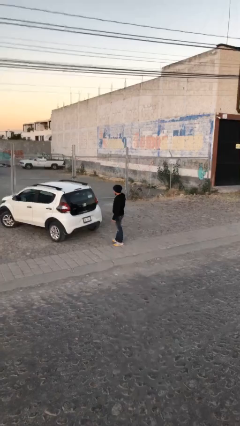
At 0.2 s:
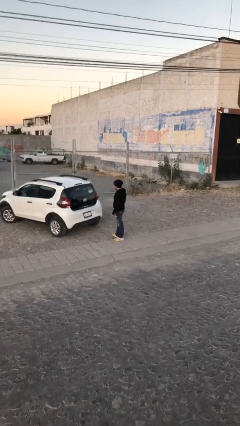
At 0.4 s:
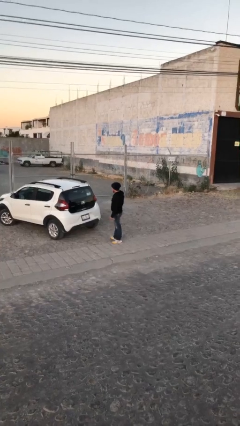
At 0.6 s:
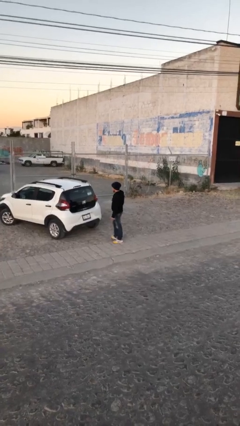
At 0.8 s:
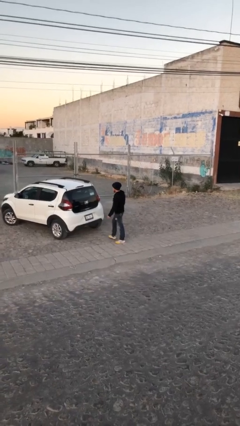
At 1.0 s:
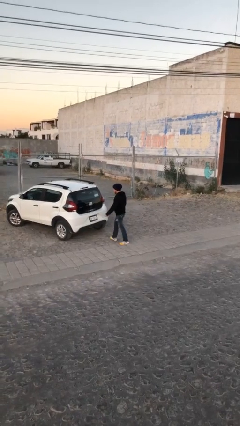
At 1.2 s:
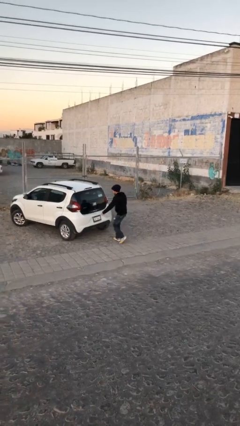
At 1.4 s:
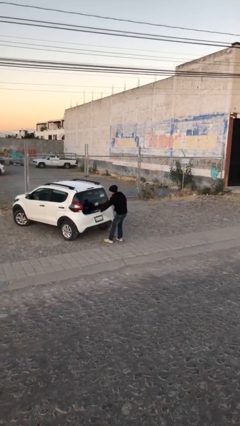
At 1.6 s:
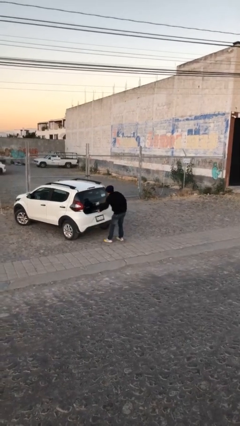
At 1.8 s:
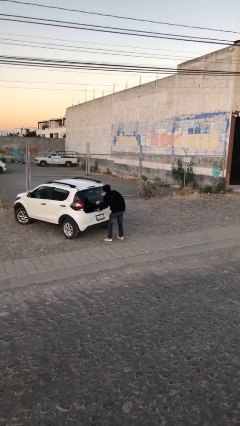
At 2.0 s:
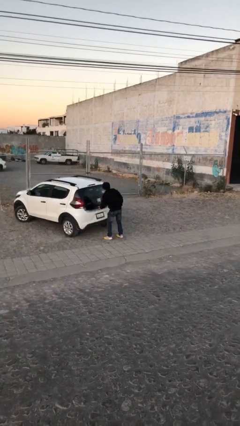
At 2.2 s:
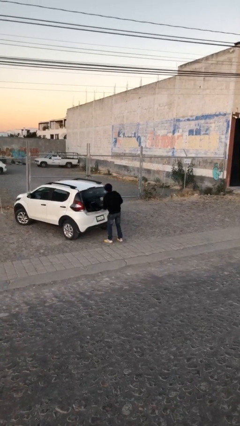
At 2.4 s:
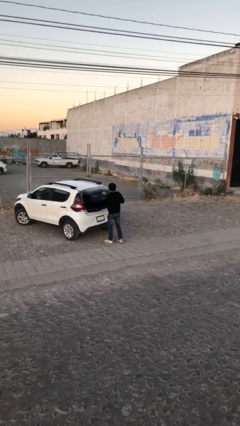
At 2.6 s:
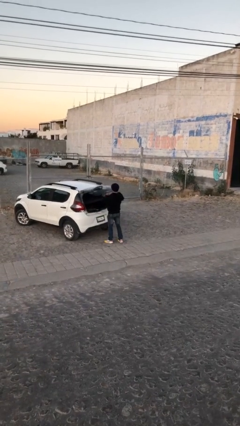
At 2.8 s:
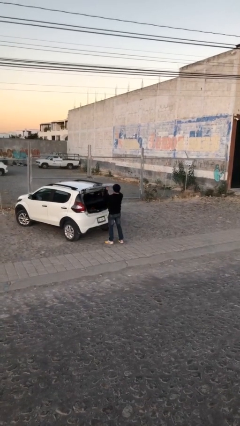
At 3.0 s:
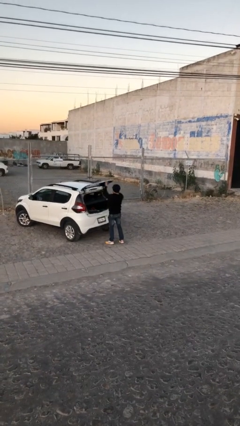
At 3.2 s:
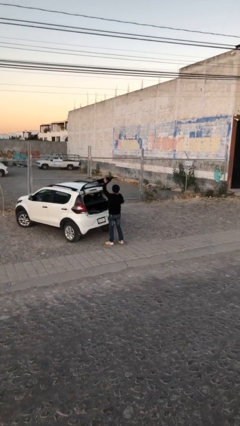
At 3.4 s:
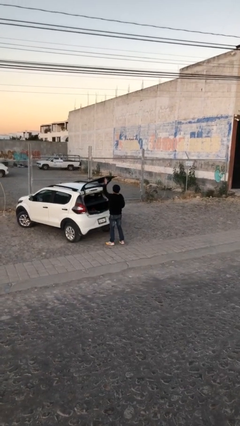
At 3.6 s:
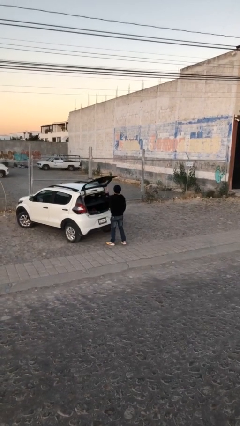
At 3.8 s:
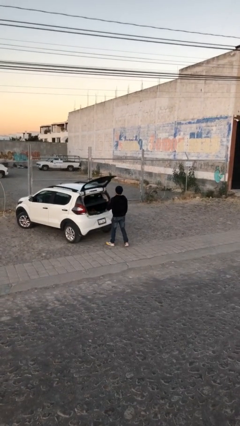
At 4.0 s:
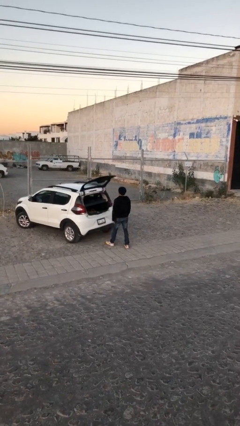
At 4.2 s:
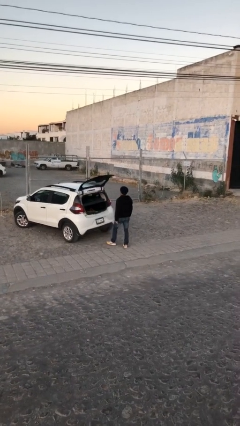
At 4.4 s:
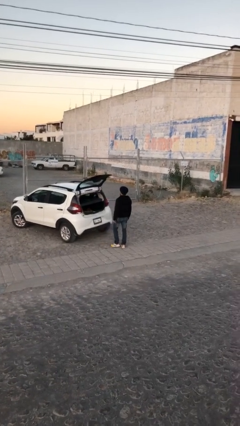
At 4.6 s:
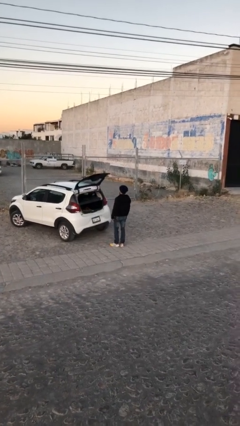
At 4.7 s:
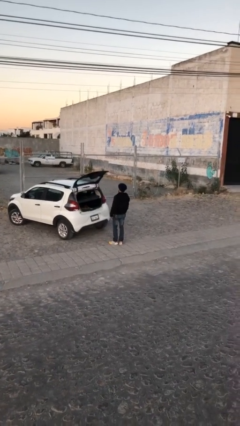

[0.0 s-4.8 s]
person opens car trunk

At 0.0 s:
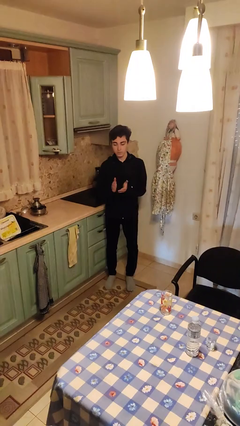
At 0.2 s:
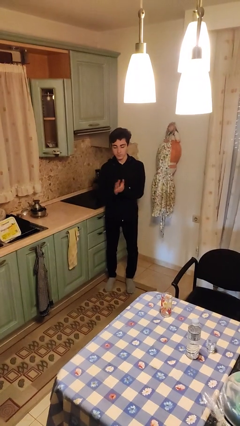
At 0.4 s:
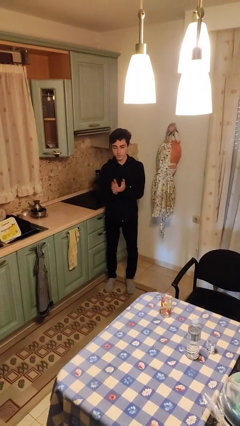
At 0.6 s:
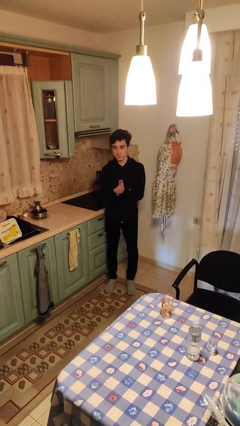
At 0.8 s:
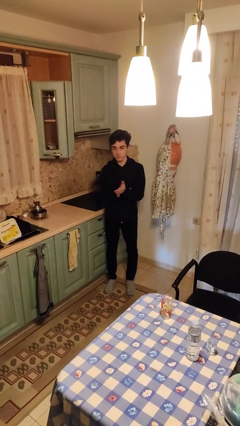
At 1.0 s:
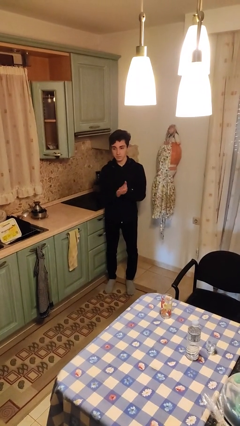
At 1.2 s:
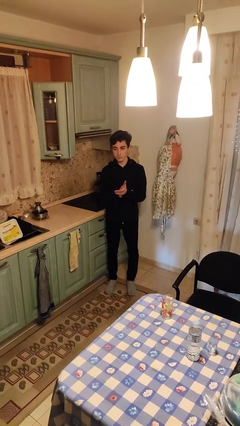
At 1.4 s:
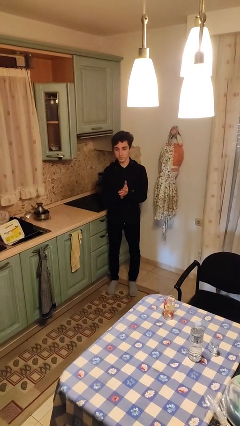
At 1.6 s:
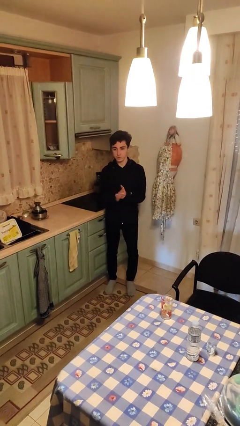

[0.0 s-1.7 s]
person claps hands

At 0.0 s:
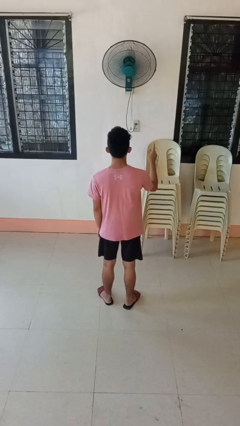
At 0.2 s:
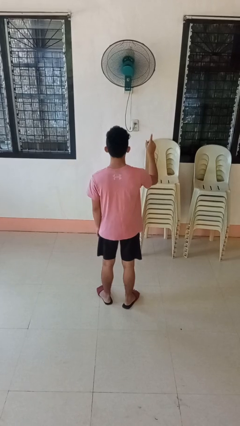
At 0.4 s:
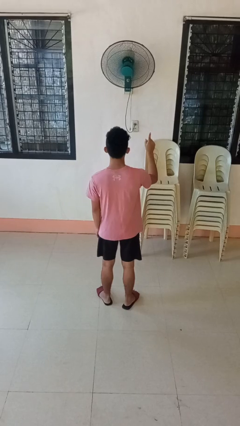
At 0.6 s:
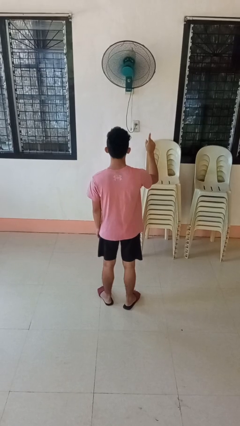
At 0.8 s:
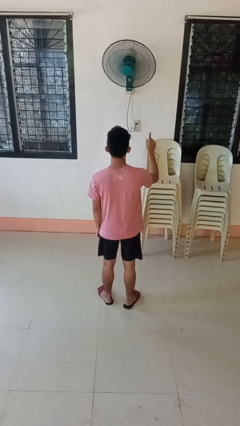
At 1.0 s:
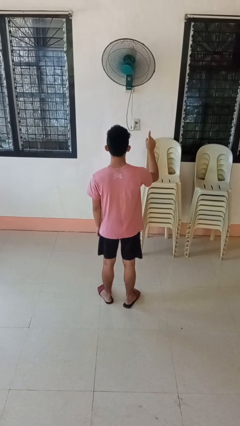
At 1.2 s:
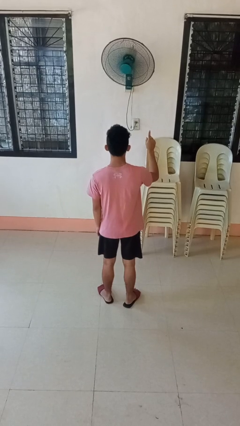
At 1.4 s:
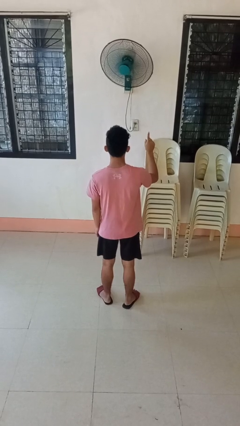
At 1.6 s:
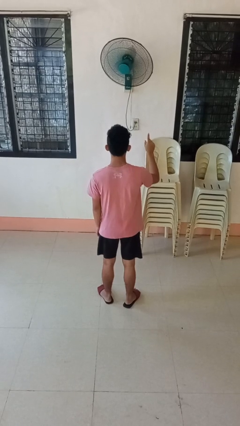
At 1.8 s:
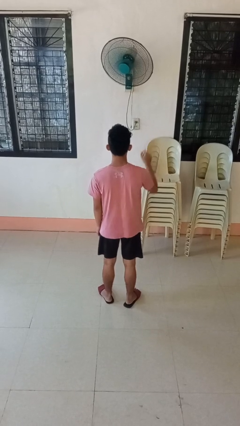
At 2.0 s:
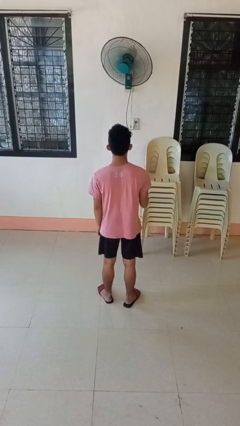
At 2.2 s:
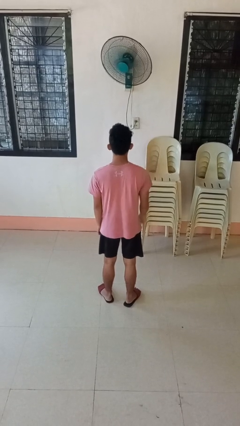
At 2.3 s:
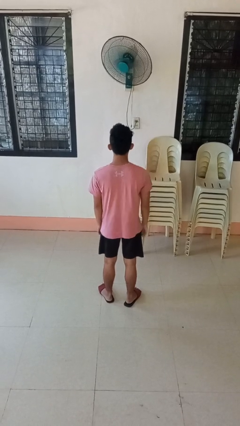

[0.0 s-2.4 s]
person gestures number one

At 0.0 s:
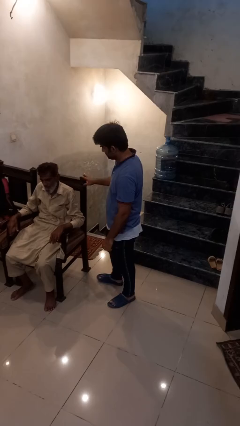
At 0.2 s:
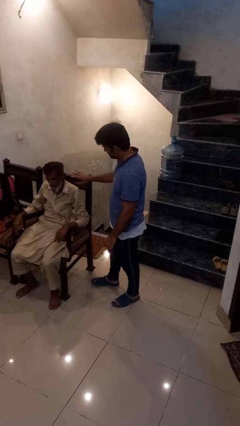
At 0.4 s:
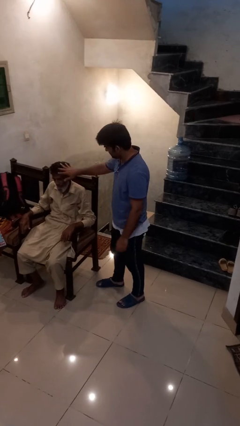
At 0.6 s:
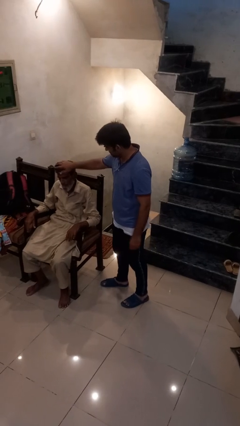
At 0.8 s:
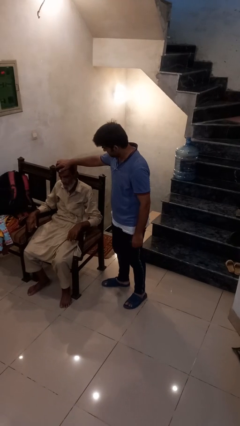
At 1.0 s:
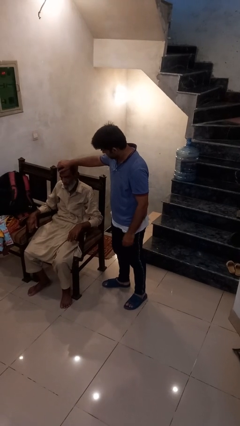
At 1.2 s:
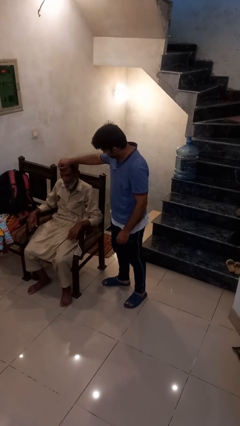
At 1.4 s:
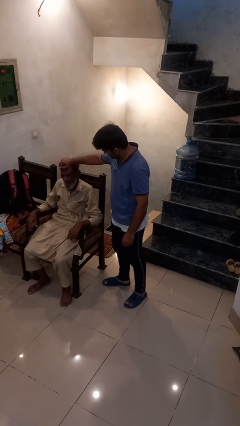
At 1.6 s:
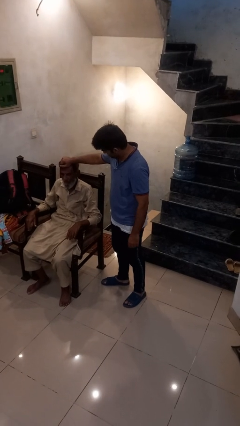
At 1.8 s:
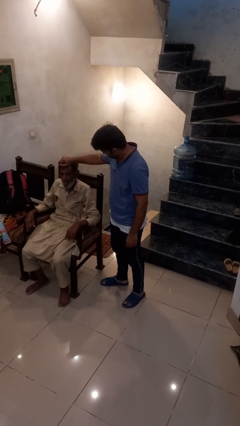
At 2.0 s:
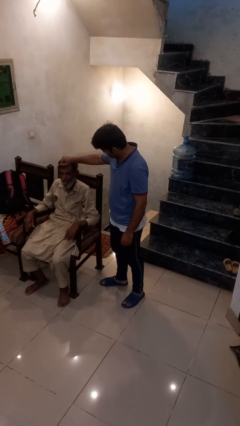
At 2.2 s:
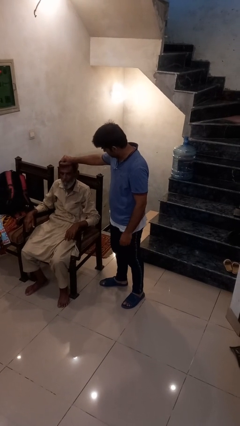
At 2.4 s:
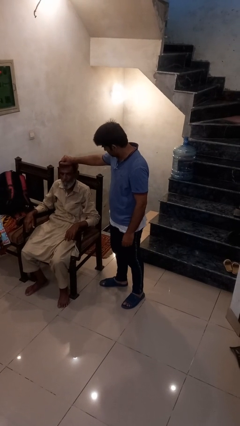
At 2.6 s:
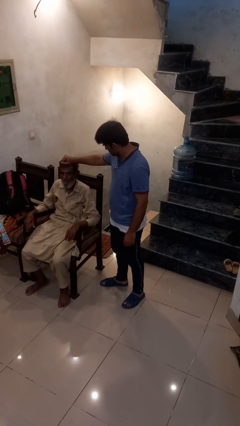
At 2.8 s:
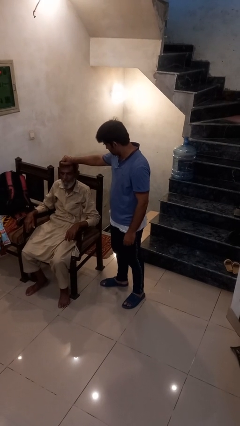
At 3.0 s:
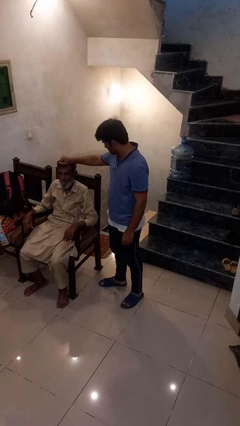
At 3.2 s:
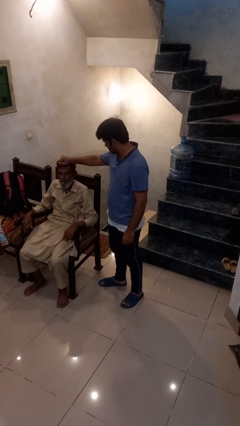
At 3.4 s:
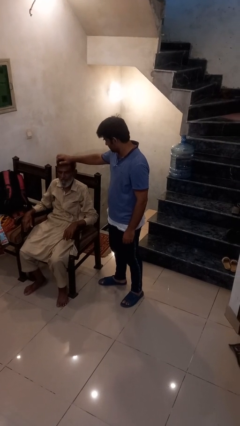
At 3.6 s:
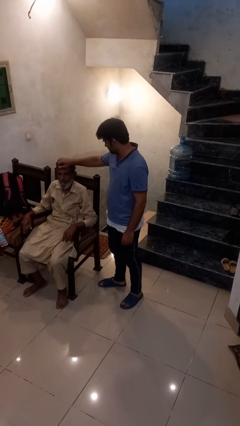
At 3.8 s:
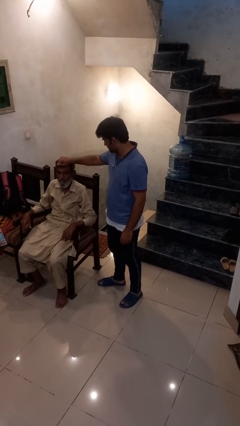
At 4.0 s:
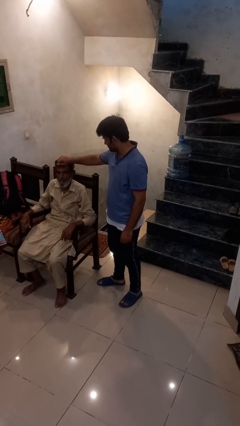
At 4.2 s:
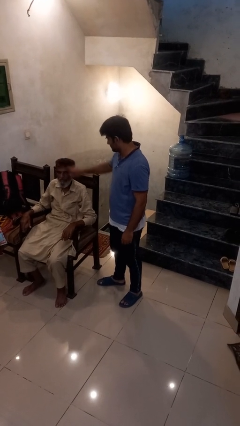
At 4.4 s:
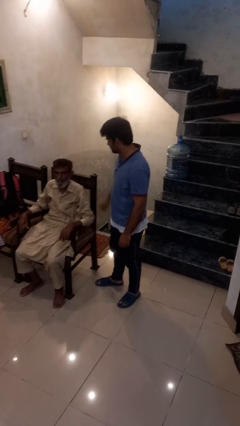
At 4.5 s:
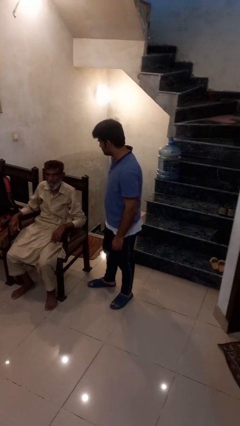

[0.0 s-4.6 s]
person grabs person by hair

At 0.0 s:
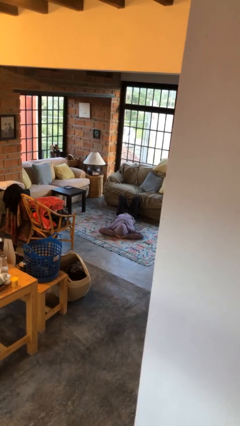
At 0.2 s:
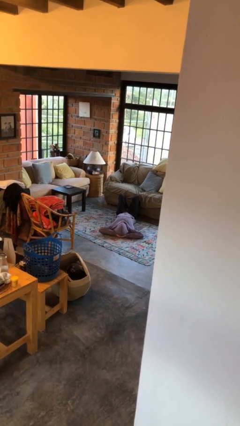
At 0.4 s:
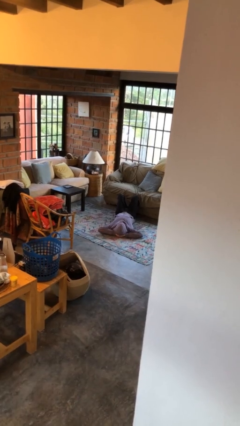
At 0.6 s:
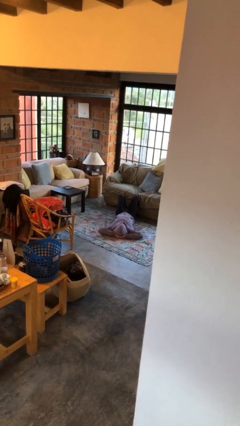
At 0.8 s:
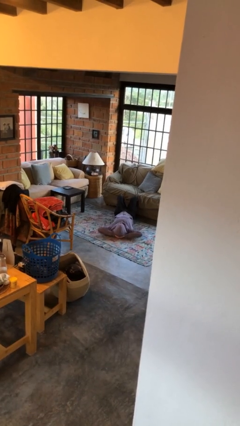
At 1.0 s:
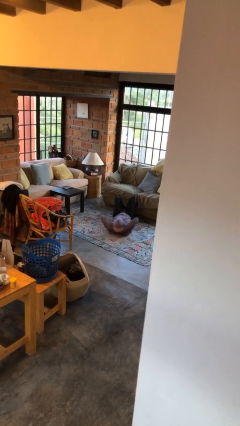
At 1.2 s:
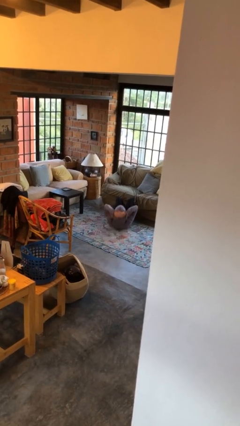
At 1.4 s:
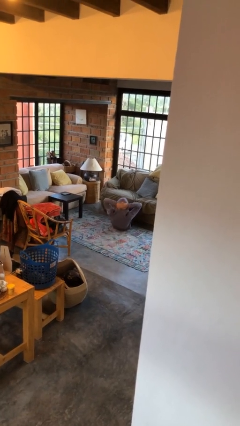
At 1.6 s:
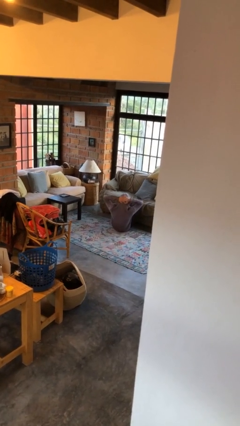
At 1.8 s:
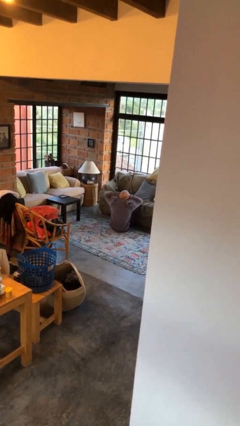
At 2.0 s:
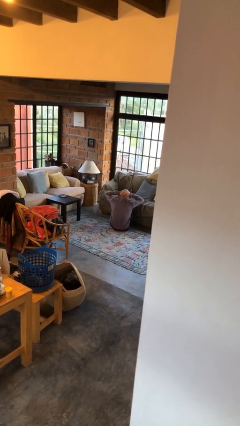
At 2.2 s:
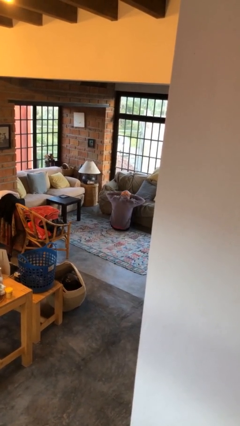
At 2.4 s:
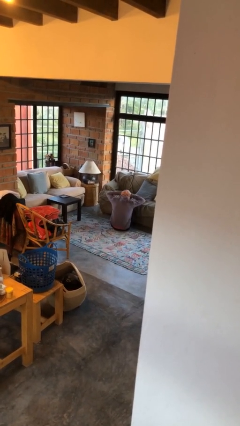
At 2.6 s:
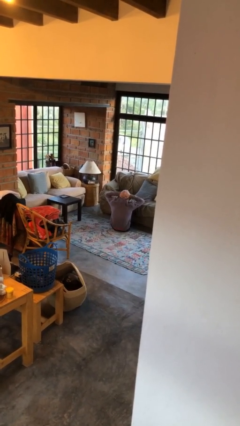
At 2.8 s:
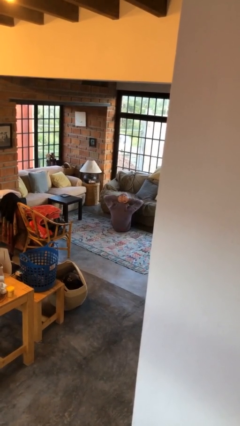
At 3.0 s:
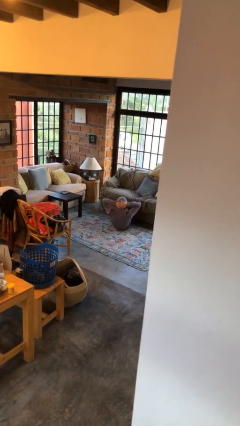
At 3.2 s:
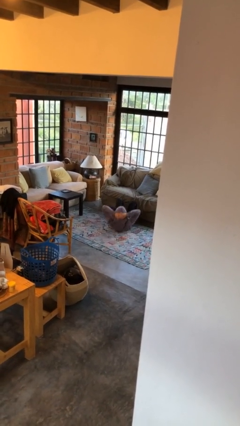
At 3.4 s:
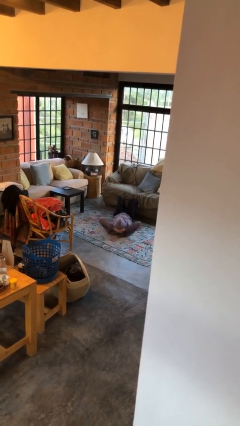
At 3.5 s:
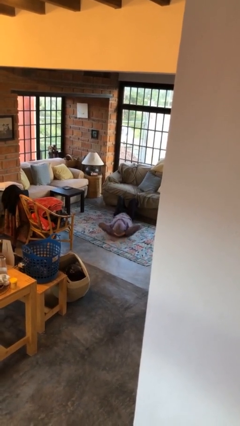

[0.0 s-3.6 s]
person exercises with situp

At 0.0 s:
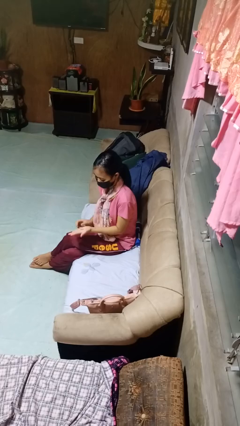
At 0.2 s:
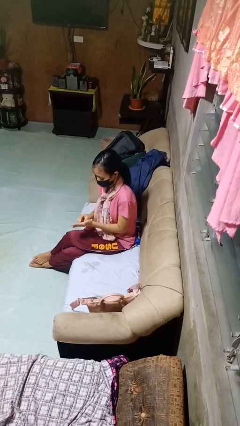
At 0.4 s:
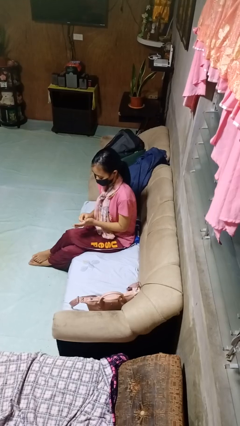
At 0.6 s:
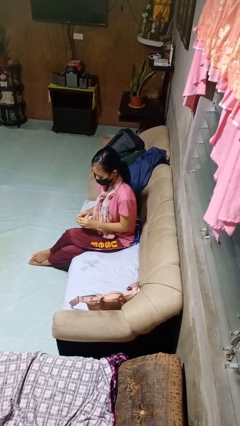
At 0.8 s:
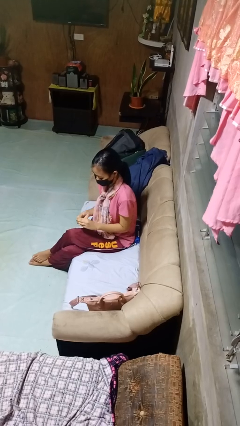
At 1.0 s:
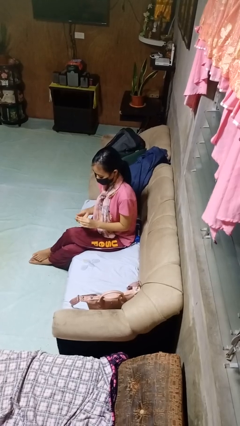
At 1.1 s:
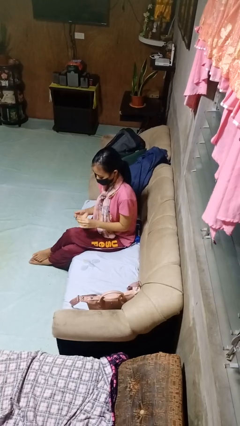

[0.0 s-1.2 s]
person puts on ring
